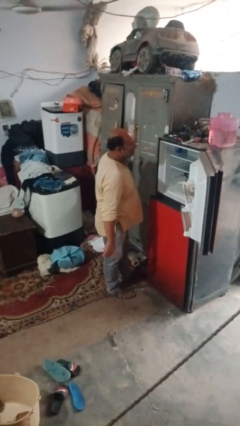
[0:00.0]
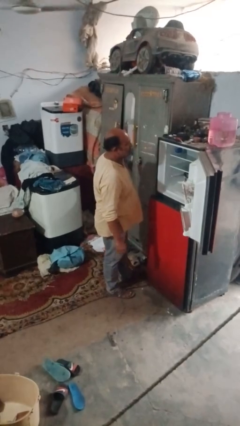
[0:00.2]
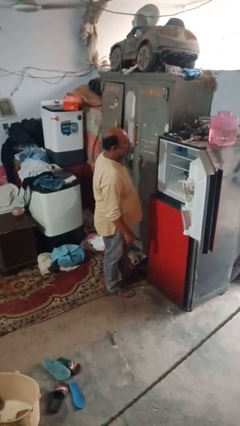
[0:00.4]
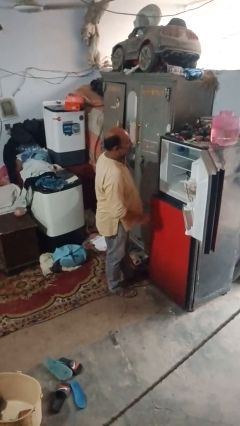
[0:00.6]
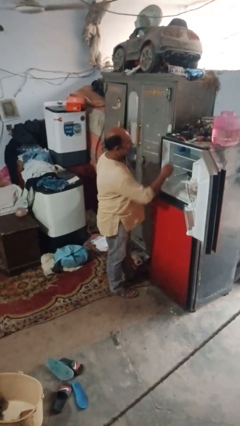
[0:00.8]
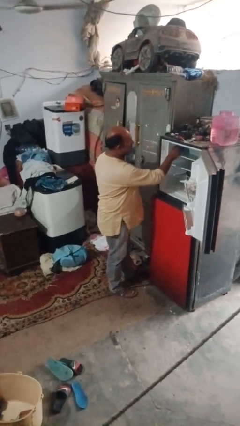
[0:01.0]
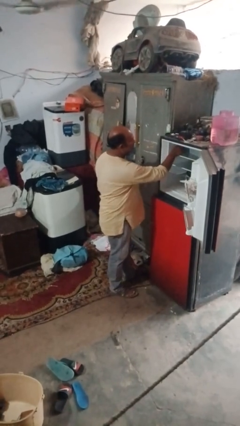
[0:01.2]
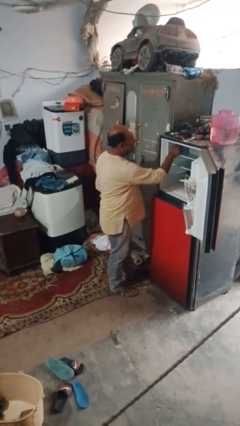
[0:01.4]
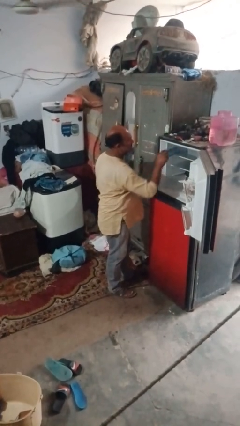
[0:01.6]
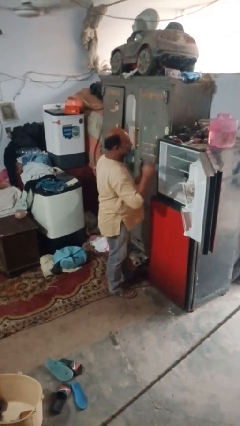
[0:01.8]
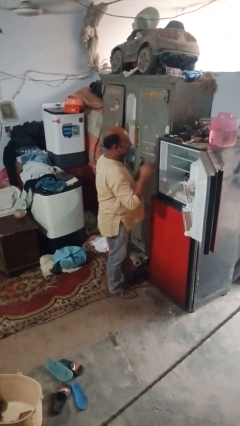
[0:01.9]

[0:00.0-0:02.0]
person takes object from refrigerator

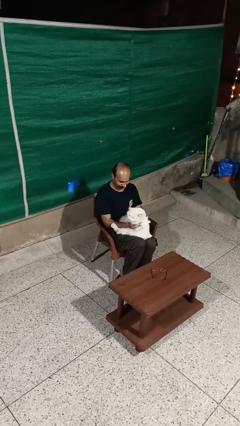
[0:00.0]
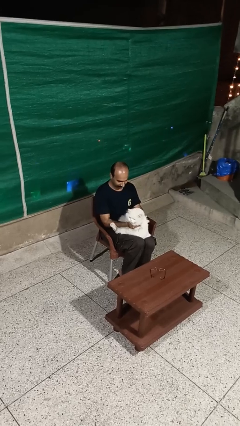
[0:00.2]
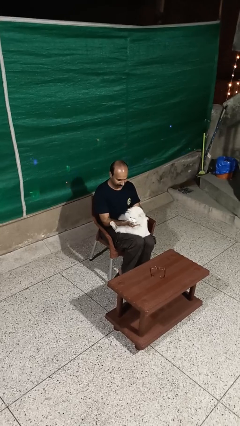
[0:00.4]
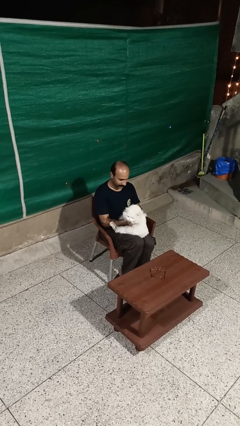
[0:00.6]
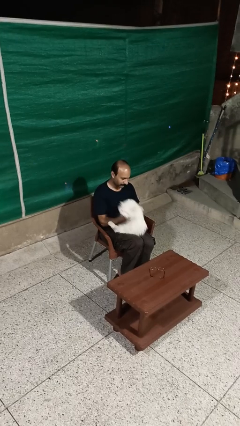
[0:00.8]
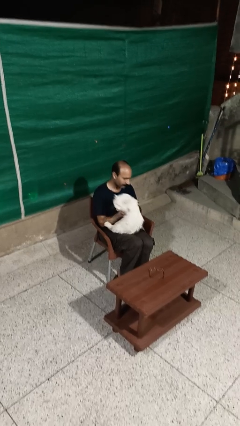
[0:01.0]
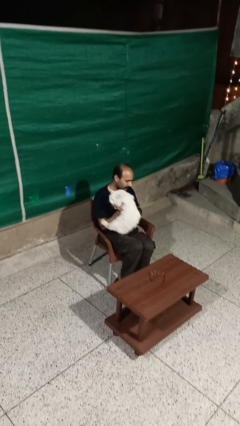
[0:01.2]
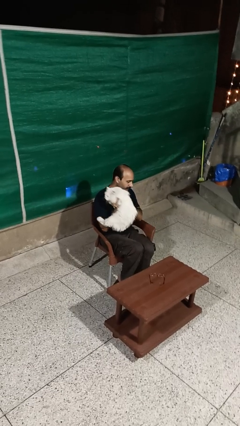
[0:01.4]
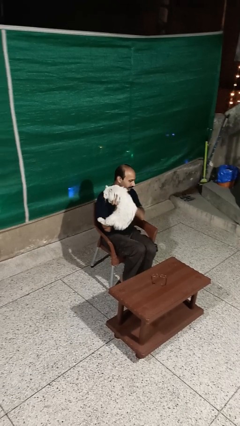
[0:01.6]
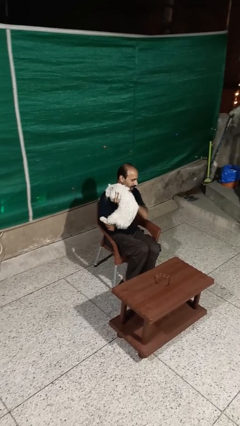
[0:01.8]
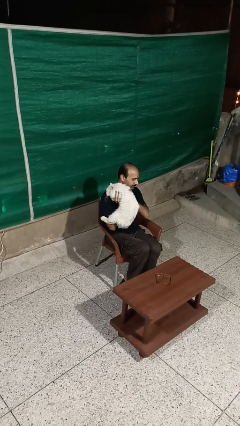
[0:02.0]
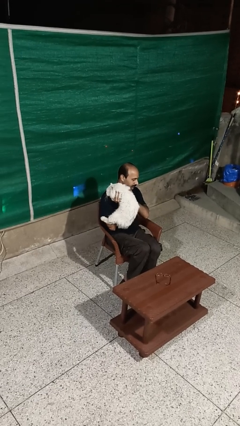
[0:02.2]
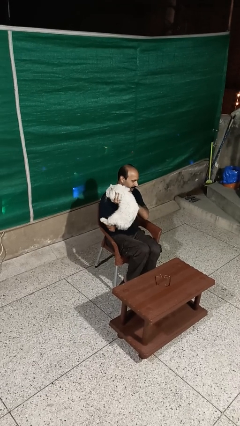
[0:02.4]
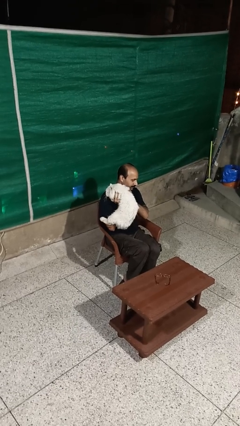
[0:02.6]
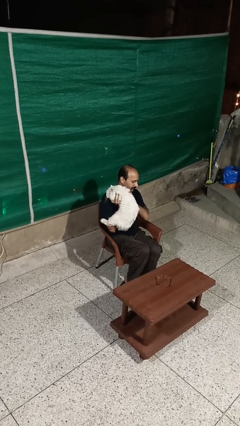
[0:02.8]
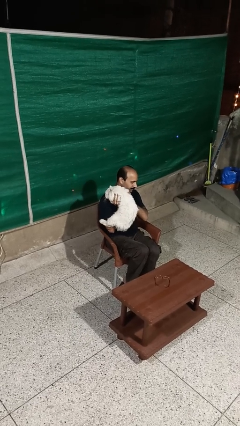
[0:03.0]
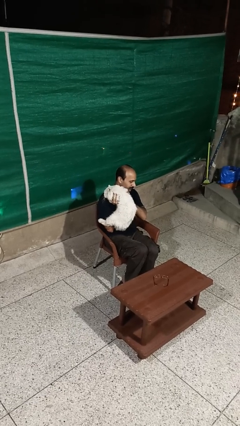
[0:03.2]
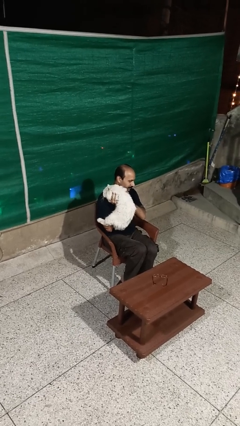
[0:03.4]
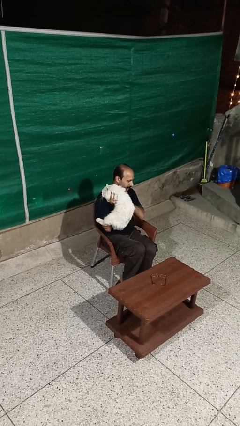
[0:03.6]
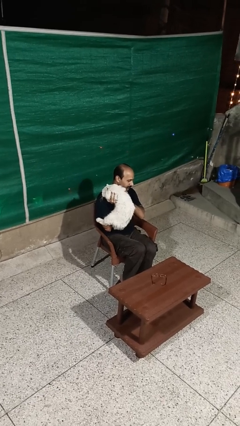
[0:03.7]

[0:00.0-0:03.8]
person hugs dog

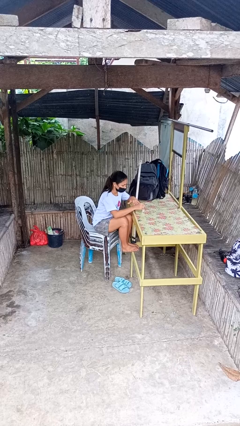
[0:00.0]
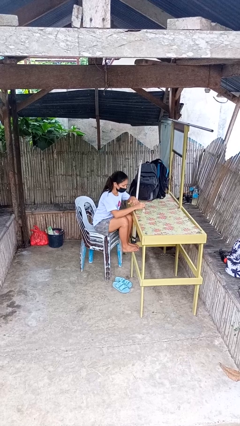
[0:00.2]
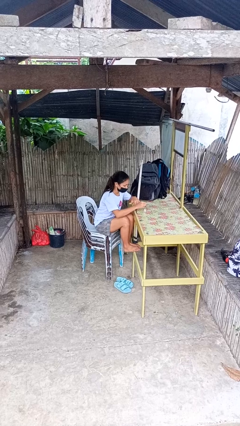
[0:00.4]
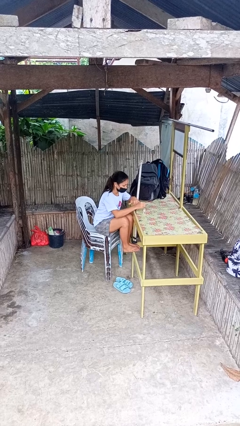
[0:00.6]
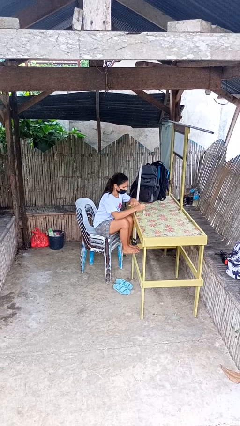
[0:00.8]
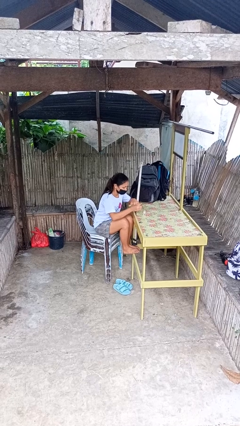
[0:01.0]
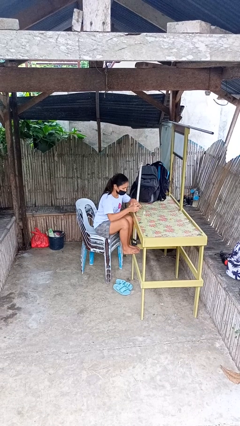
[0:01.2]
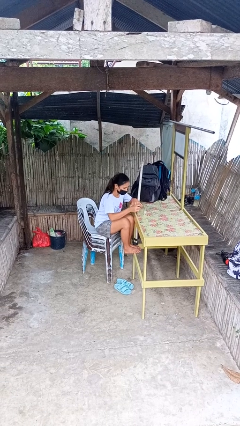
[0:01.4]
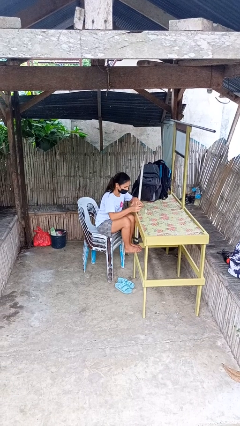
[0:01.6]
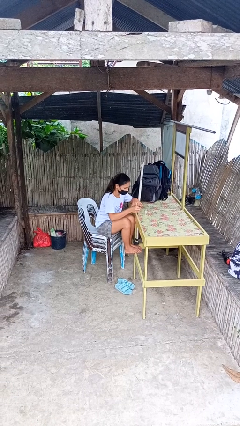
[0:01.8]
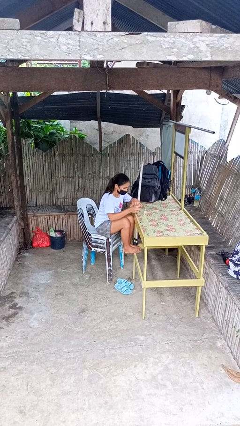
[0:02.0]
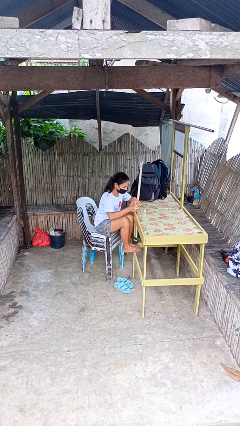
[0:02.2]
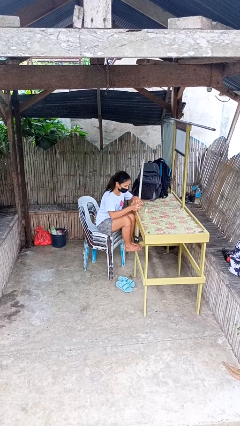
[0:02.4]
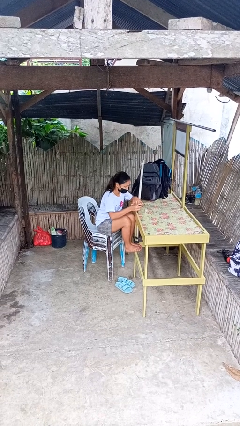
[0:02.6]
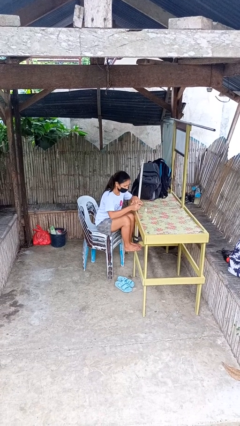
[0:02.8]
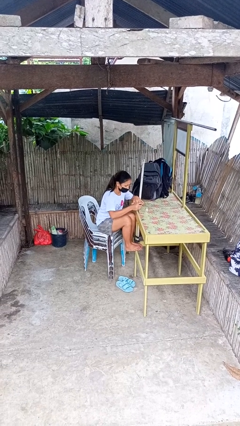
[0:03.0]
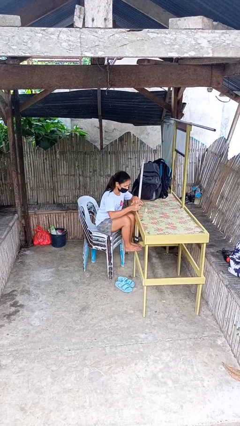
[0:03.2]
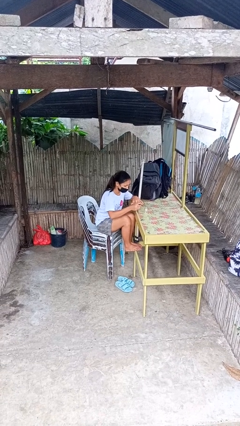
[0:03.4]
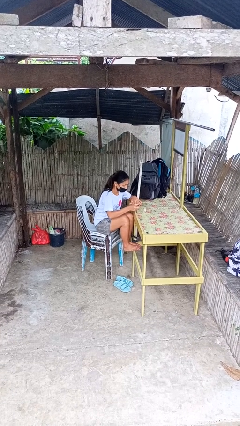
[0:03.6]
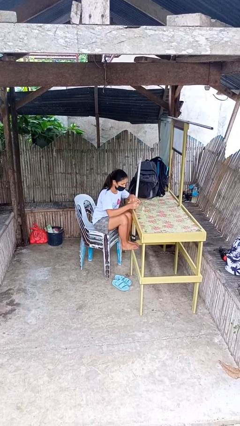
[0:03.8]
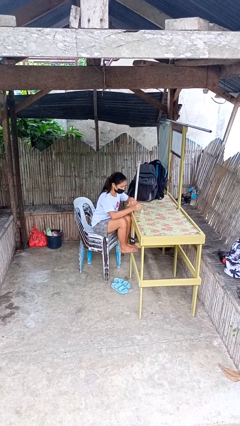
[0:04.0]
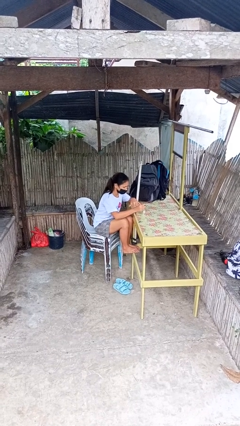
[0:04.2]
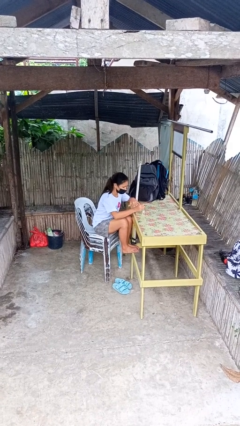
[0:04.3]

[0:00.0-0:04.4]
person paints fingernails

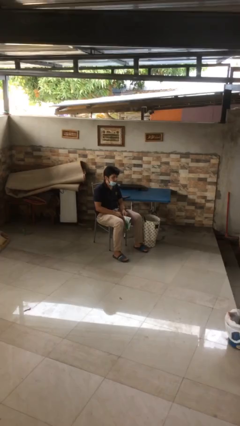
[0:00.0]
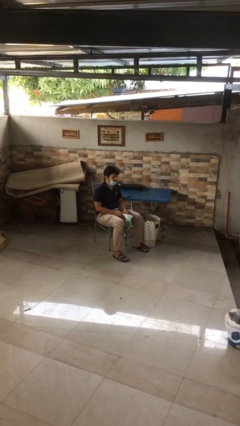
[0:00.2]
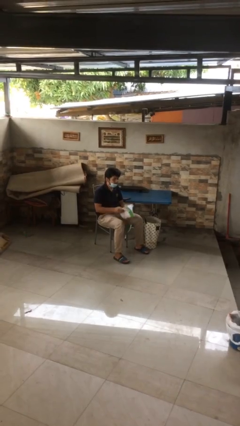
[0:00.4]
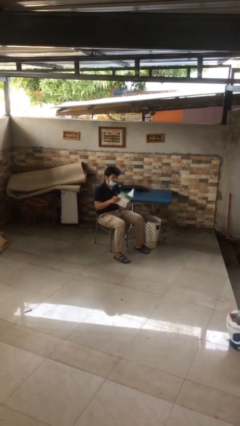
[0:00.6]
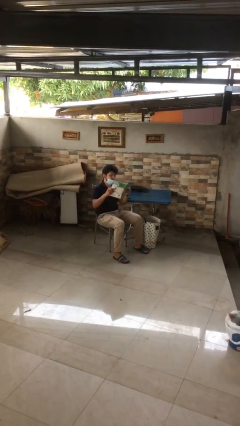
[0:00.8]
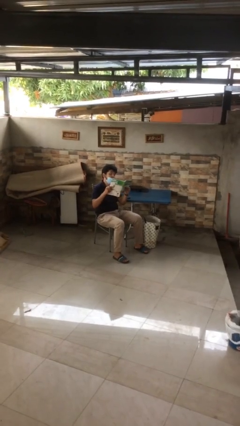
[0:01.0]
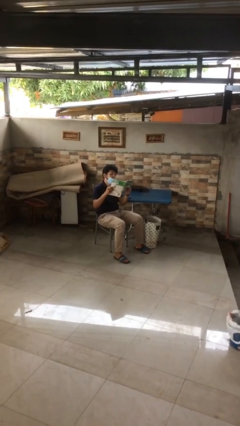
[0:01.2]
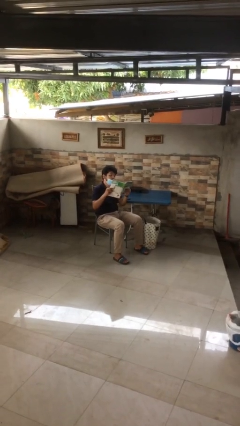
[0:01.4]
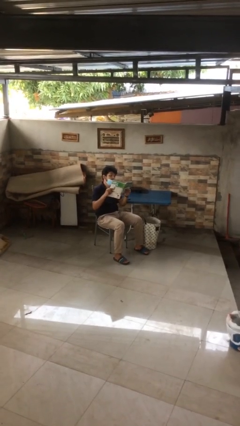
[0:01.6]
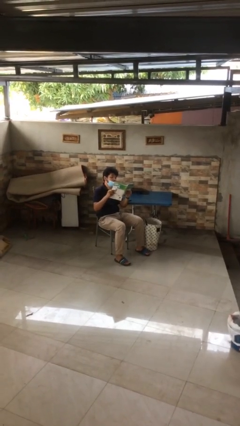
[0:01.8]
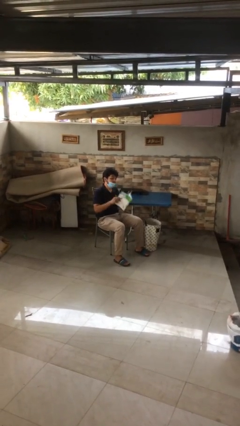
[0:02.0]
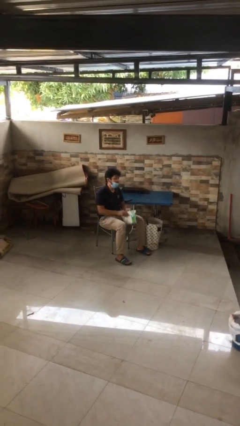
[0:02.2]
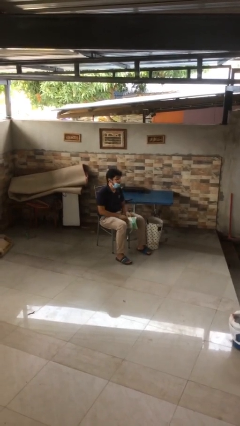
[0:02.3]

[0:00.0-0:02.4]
person reads magazine

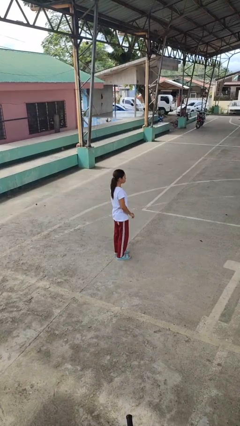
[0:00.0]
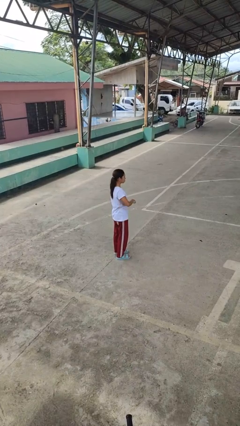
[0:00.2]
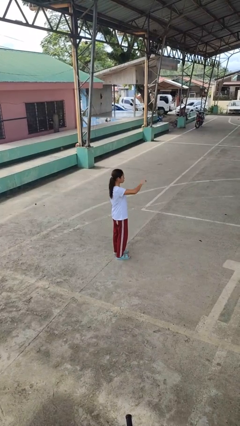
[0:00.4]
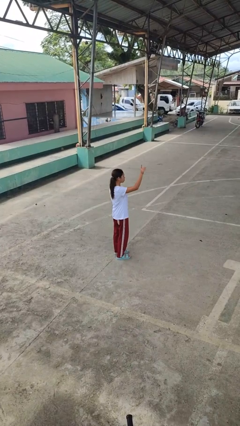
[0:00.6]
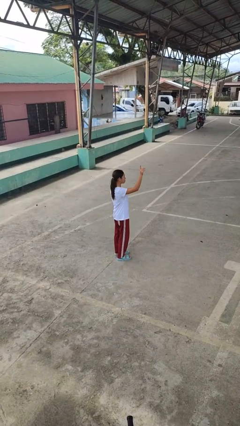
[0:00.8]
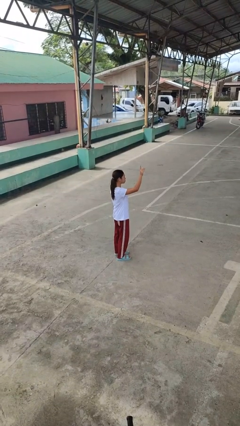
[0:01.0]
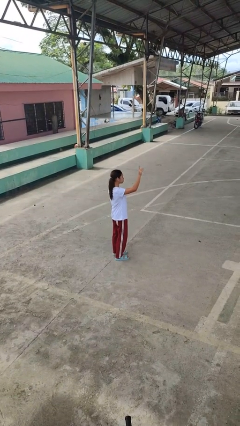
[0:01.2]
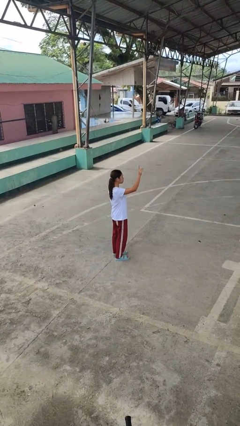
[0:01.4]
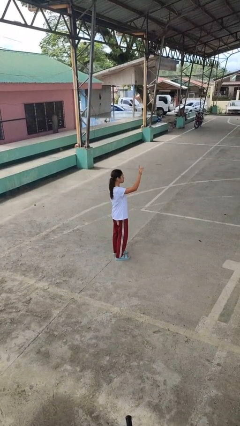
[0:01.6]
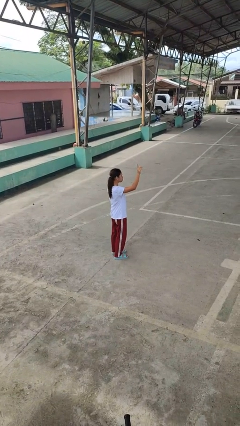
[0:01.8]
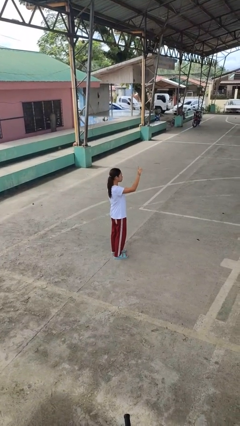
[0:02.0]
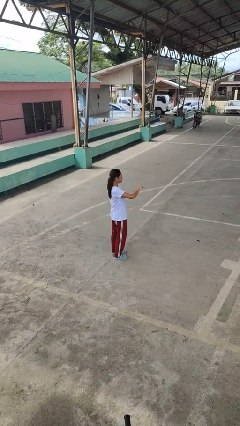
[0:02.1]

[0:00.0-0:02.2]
person gestures swipe up

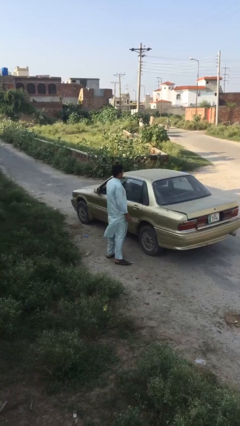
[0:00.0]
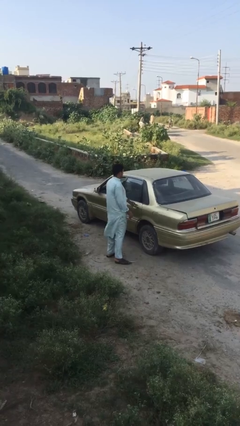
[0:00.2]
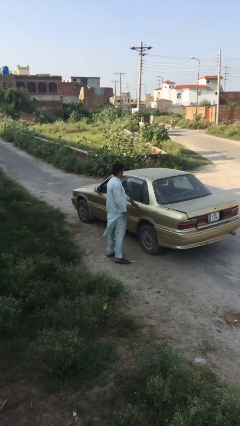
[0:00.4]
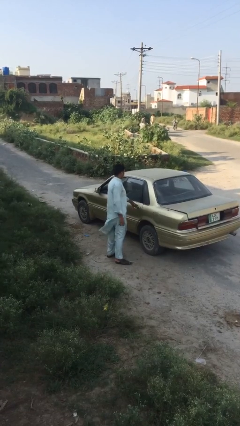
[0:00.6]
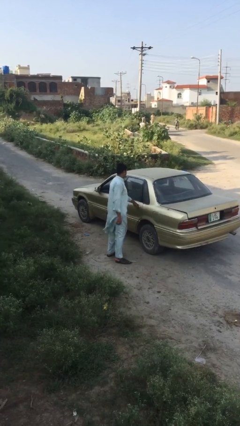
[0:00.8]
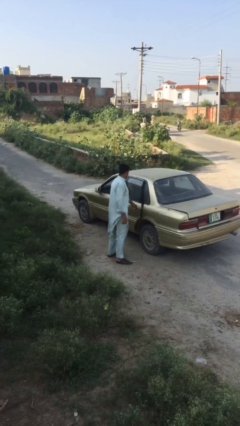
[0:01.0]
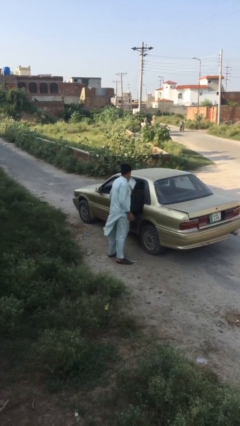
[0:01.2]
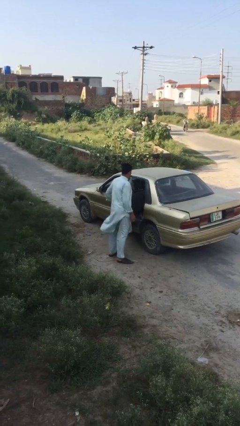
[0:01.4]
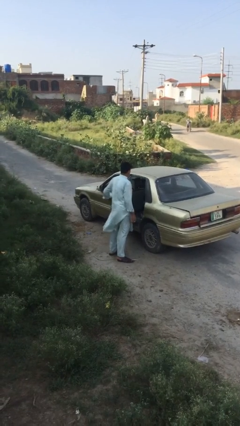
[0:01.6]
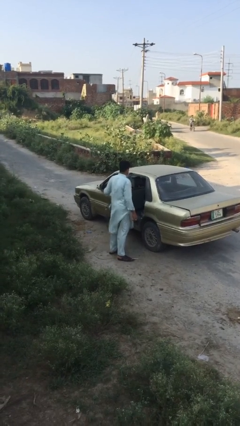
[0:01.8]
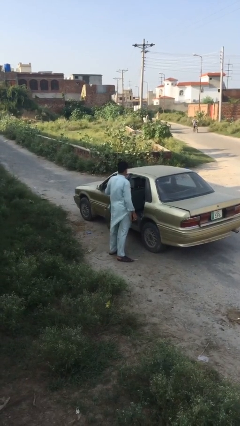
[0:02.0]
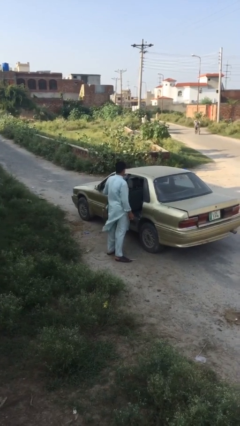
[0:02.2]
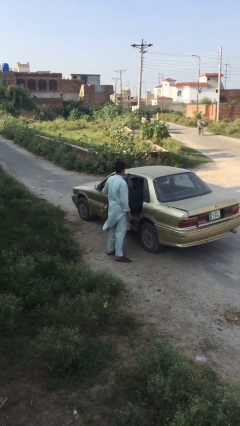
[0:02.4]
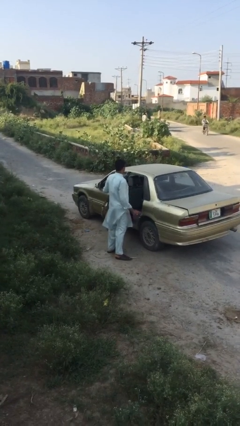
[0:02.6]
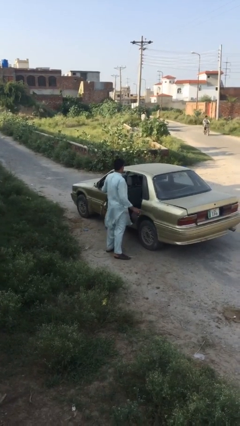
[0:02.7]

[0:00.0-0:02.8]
person opens car door

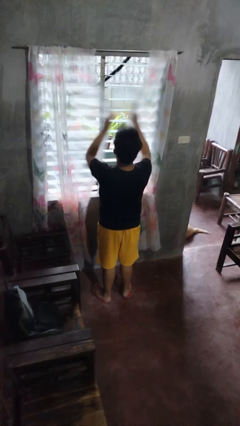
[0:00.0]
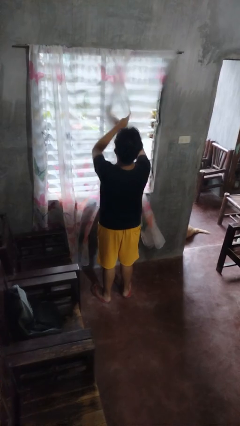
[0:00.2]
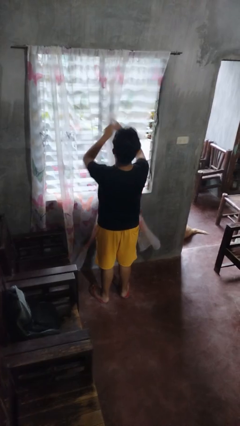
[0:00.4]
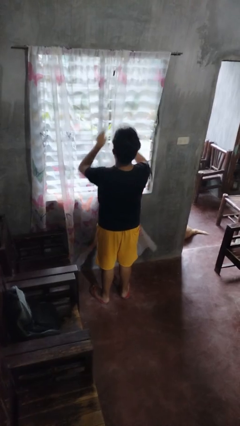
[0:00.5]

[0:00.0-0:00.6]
person closes curtains
